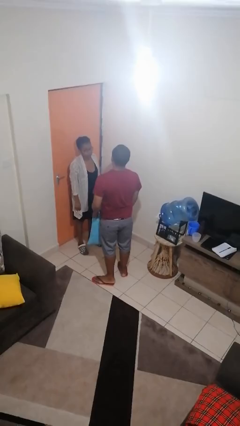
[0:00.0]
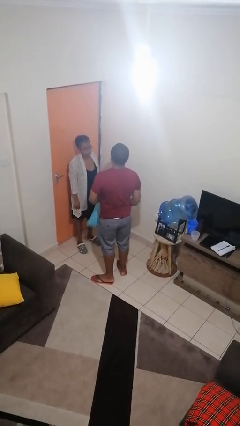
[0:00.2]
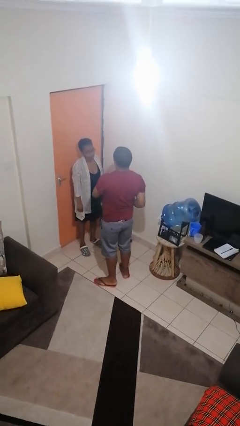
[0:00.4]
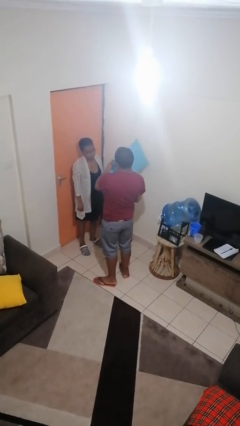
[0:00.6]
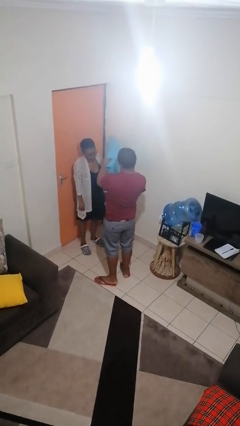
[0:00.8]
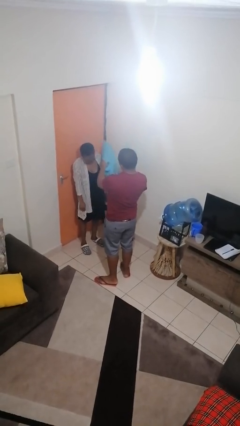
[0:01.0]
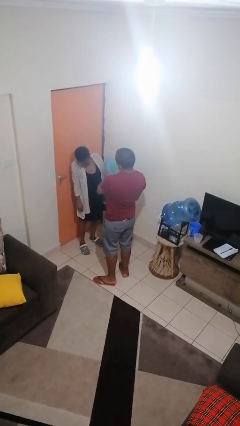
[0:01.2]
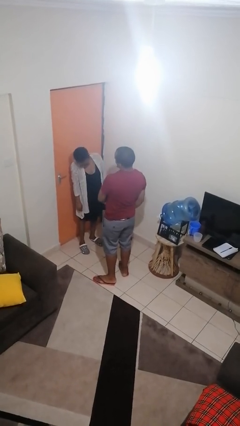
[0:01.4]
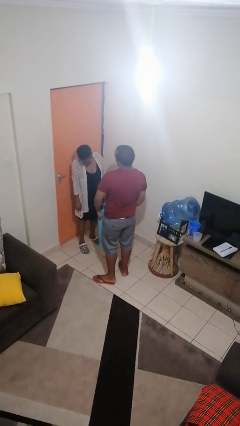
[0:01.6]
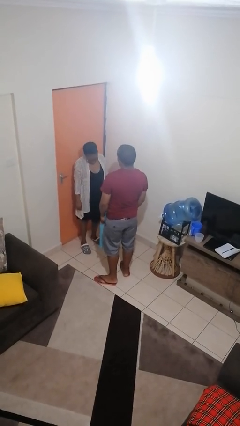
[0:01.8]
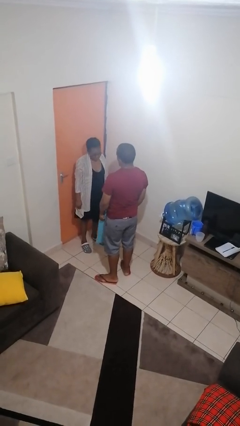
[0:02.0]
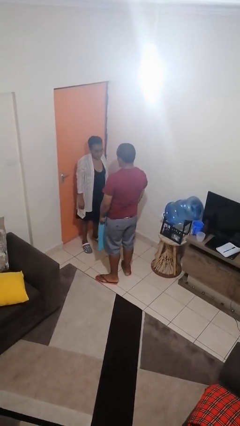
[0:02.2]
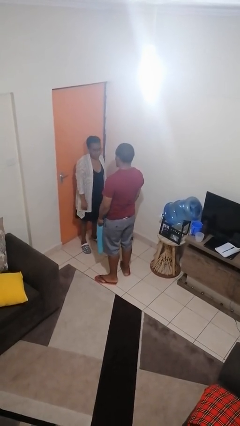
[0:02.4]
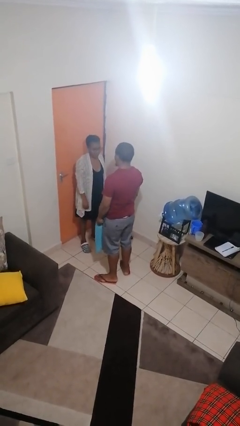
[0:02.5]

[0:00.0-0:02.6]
person hits person with pillow

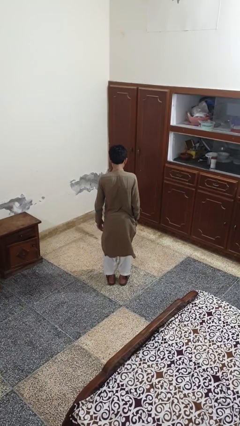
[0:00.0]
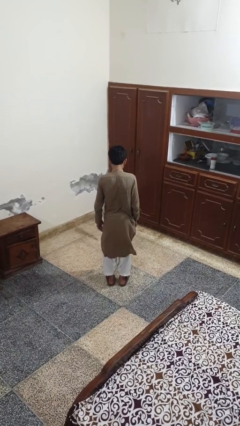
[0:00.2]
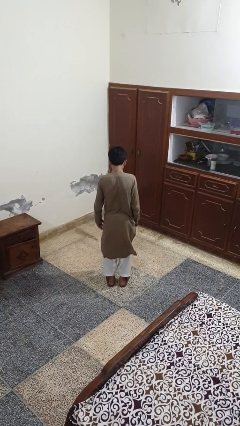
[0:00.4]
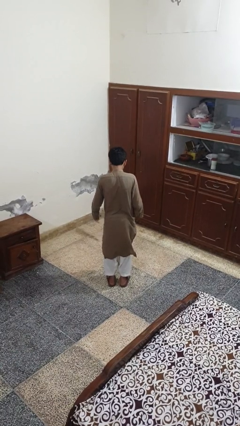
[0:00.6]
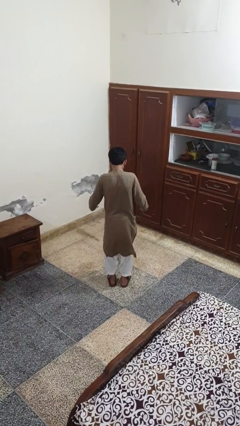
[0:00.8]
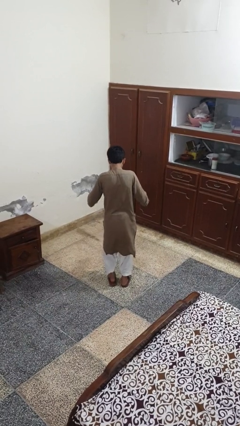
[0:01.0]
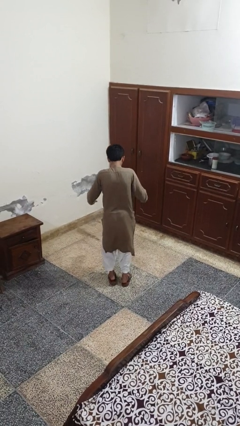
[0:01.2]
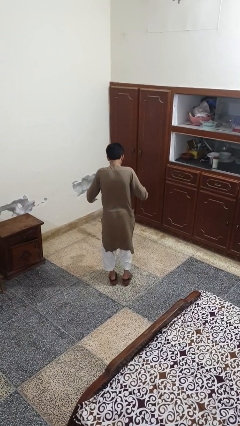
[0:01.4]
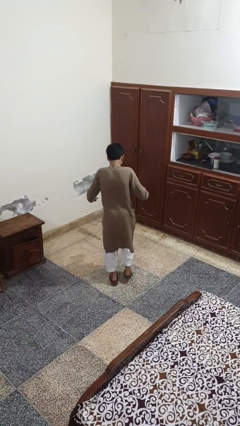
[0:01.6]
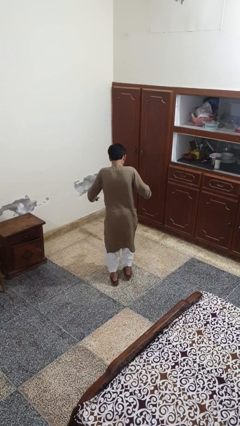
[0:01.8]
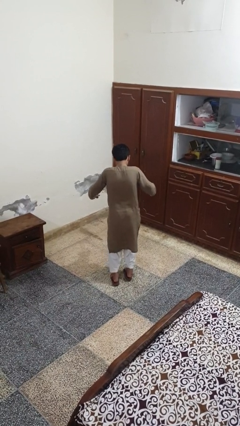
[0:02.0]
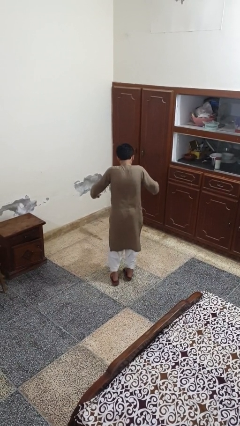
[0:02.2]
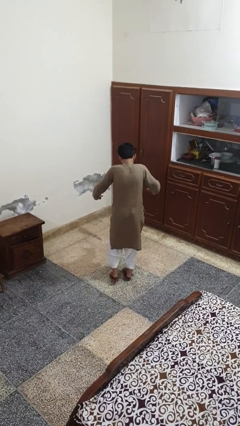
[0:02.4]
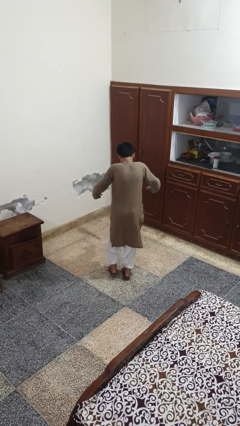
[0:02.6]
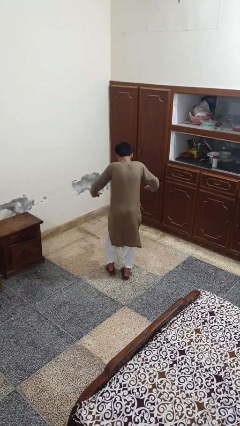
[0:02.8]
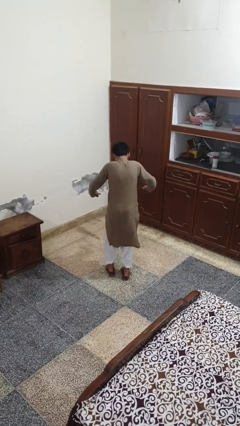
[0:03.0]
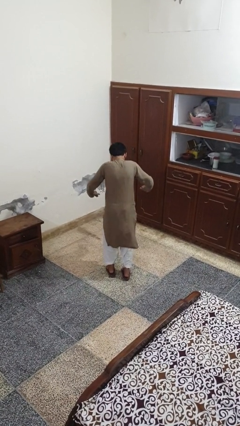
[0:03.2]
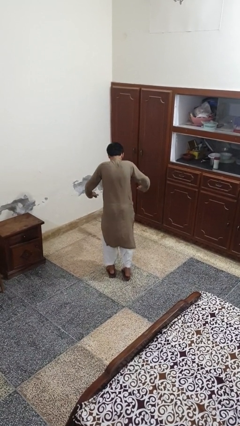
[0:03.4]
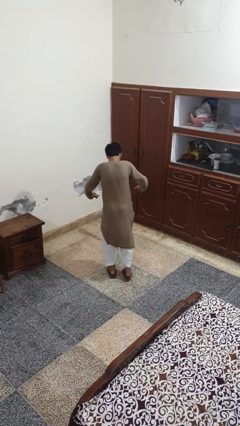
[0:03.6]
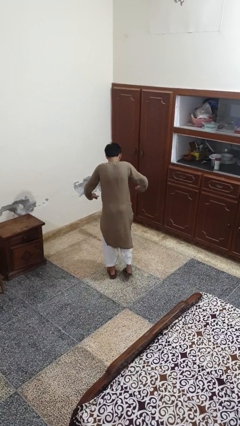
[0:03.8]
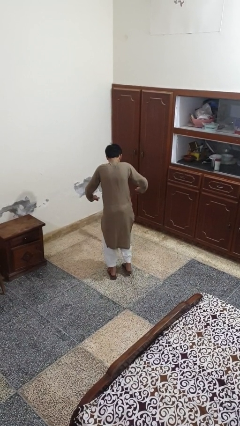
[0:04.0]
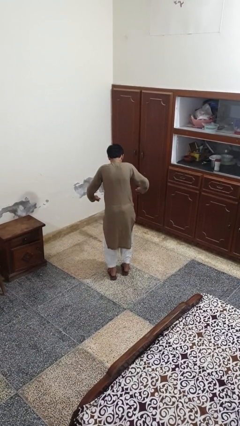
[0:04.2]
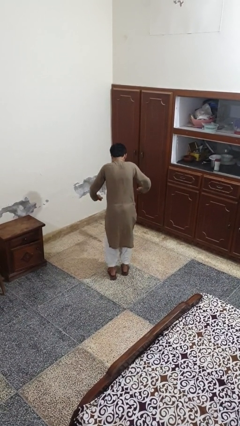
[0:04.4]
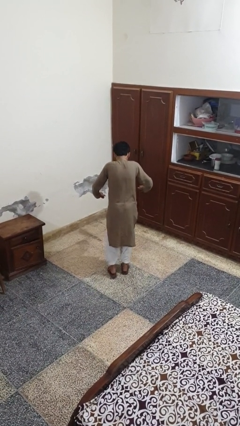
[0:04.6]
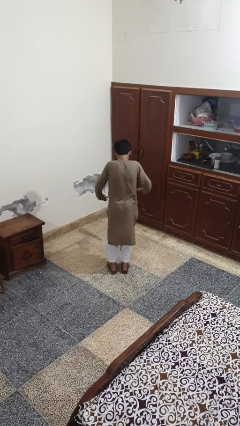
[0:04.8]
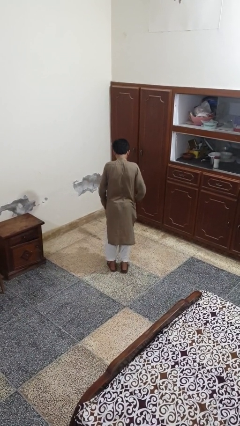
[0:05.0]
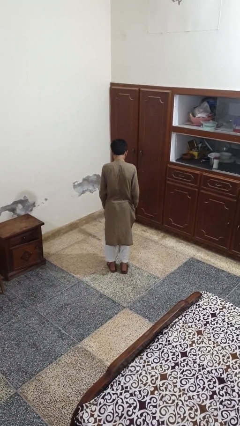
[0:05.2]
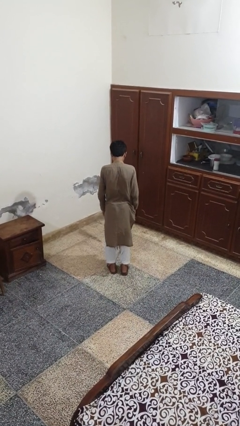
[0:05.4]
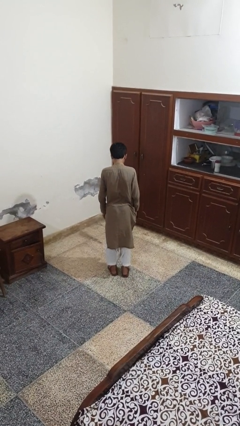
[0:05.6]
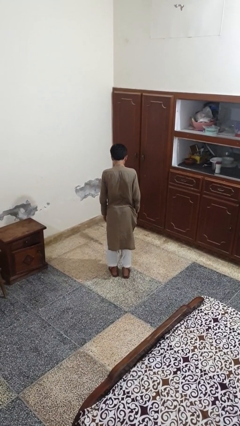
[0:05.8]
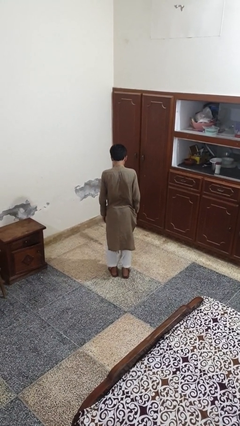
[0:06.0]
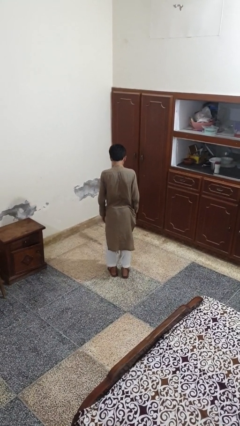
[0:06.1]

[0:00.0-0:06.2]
person walks tiptoe

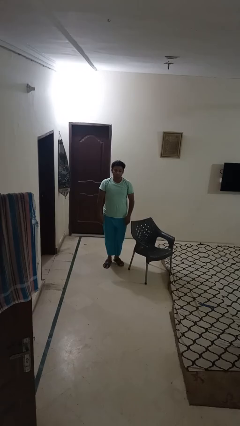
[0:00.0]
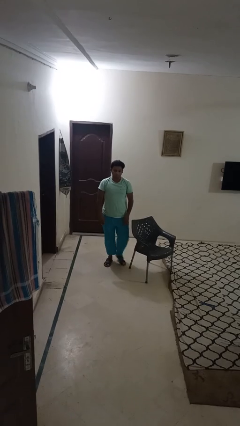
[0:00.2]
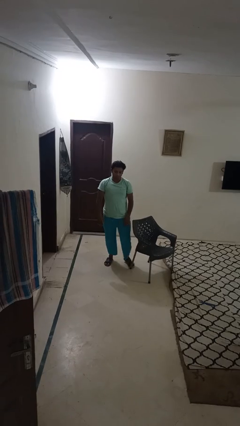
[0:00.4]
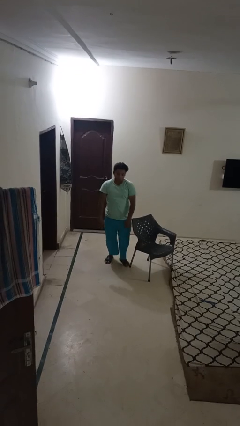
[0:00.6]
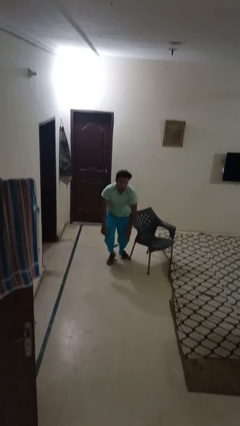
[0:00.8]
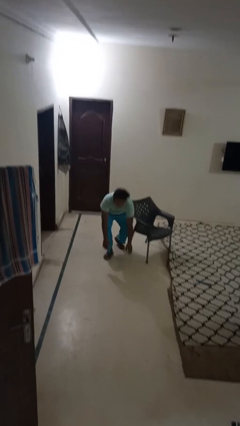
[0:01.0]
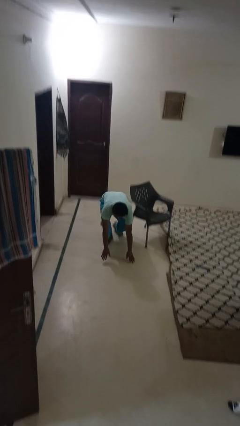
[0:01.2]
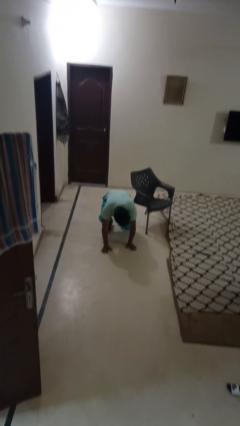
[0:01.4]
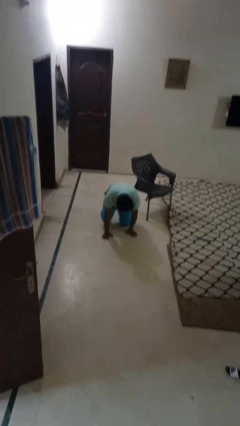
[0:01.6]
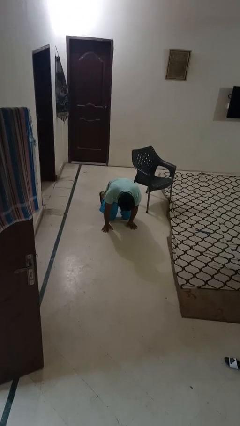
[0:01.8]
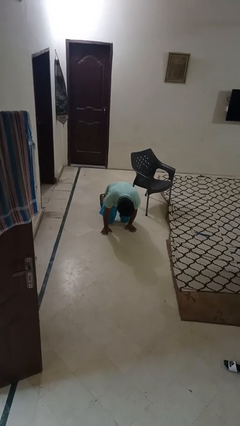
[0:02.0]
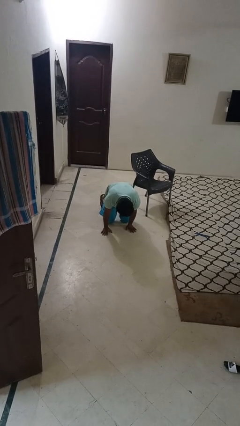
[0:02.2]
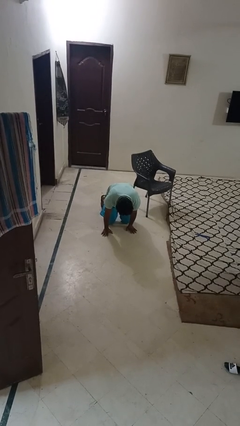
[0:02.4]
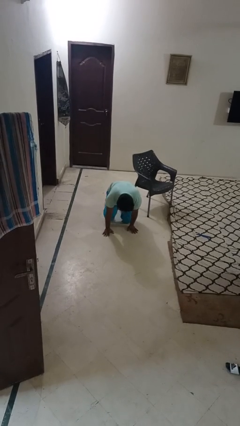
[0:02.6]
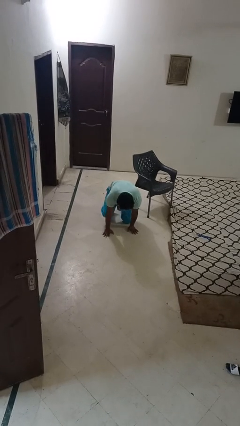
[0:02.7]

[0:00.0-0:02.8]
person trips on object on floor

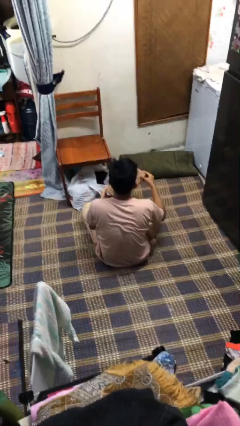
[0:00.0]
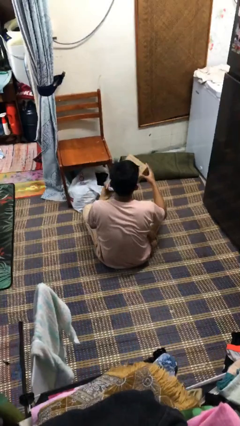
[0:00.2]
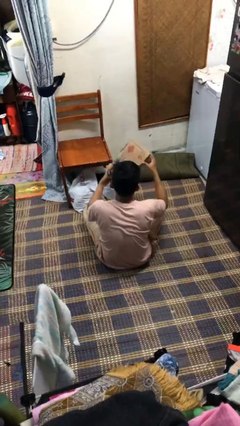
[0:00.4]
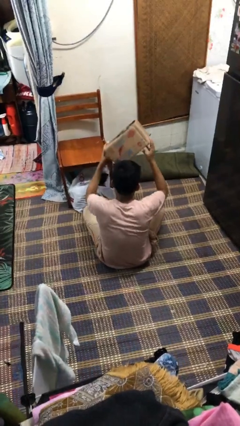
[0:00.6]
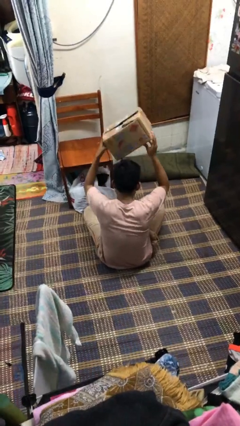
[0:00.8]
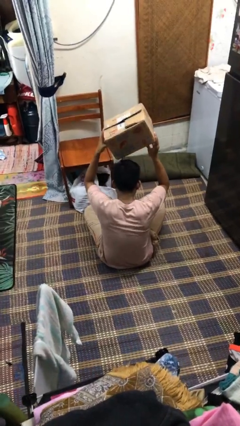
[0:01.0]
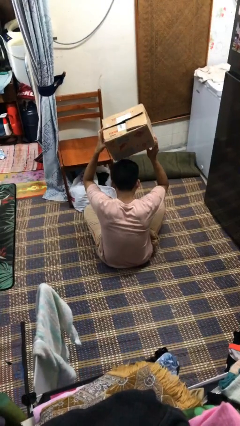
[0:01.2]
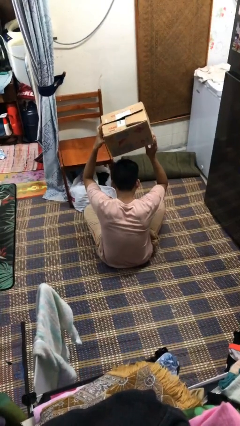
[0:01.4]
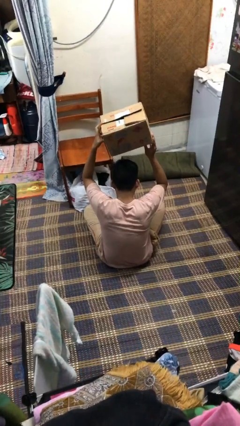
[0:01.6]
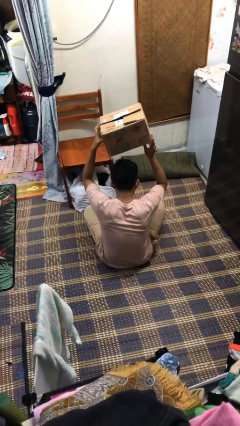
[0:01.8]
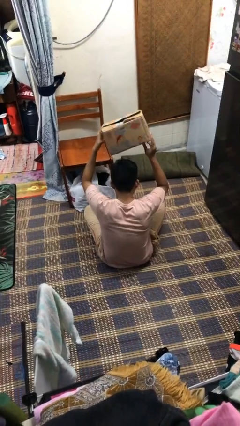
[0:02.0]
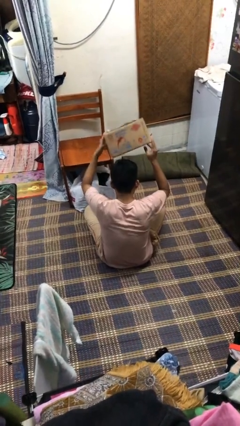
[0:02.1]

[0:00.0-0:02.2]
person holds object above head

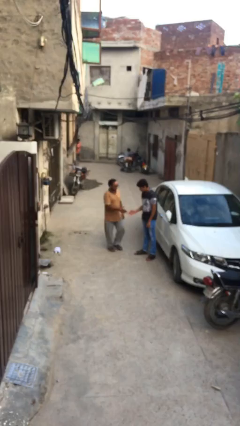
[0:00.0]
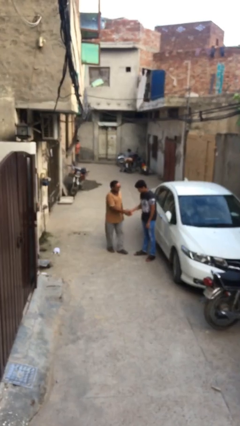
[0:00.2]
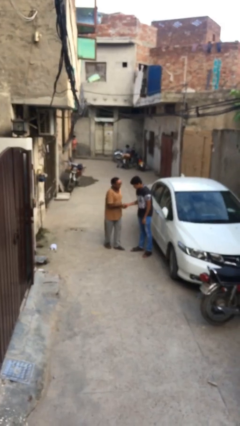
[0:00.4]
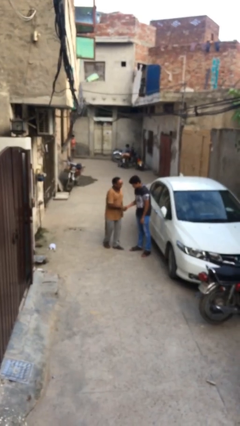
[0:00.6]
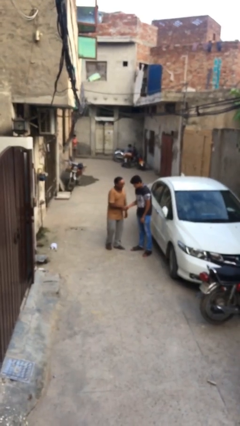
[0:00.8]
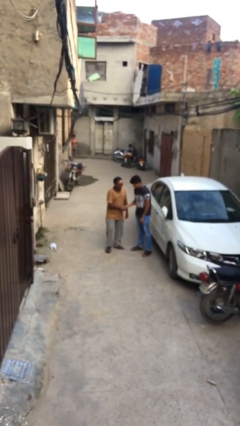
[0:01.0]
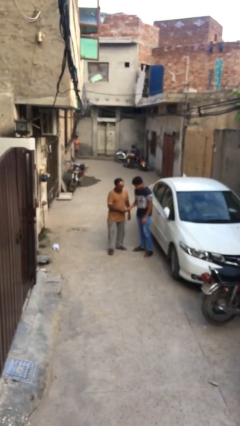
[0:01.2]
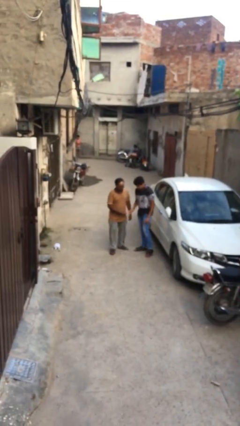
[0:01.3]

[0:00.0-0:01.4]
person shakes hand

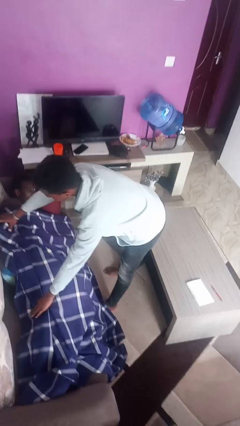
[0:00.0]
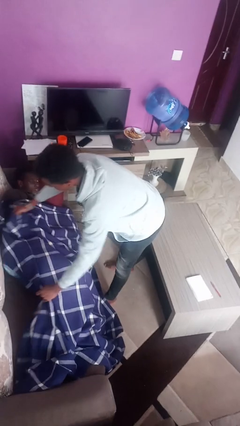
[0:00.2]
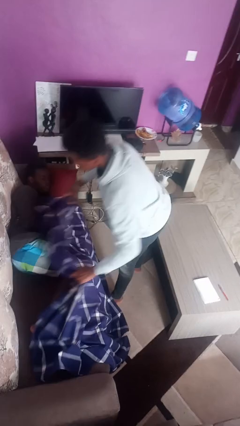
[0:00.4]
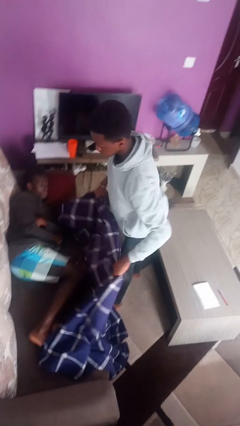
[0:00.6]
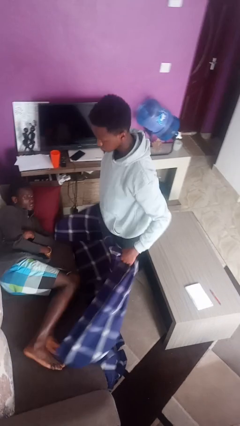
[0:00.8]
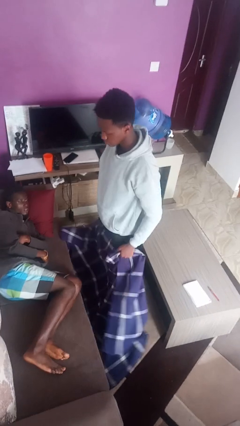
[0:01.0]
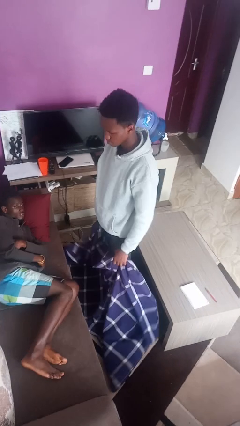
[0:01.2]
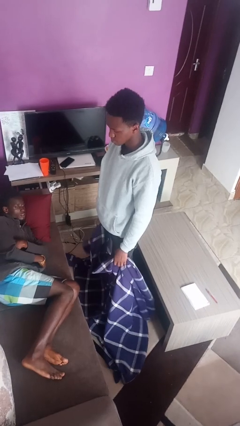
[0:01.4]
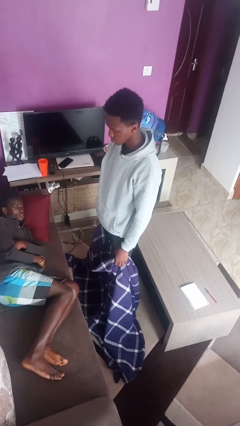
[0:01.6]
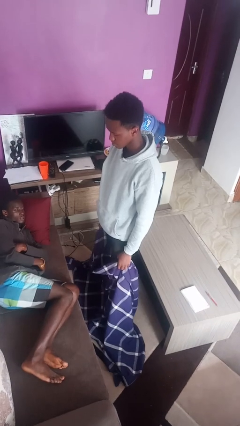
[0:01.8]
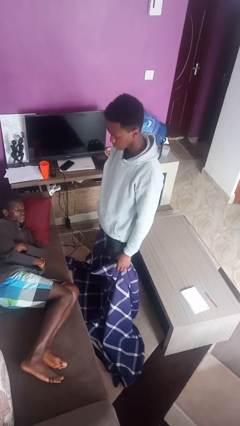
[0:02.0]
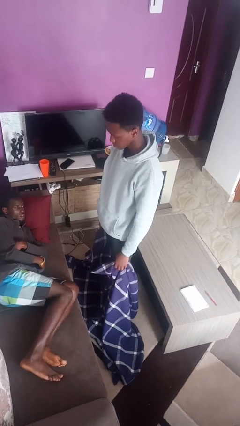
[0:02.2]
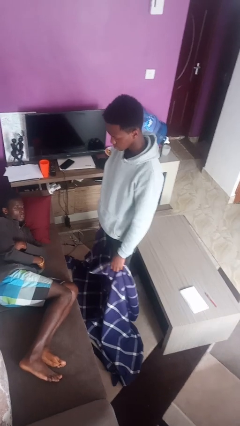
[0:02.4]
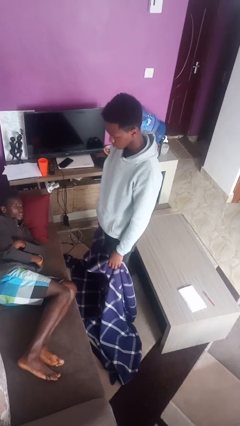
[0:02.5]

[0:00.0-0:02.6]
person uncovers friend with blanket
